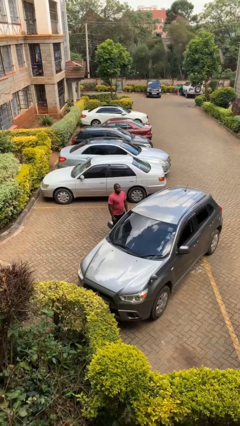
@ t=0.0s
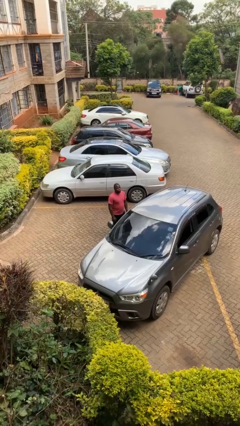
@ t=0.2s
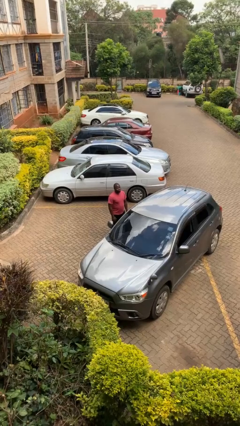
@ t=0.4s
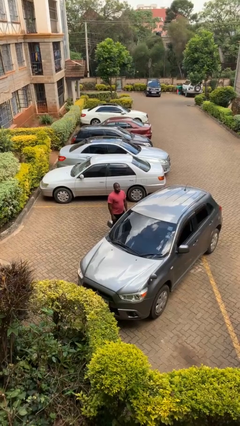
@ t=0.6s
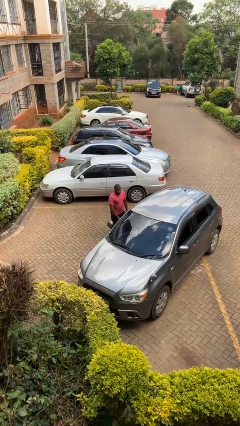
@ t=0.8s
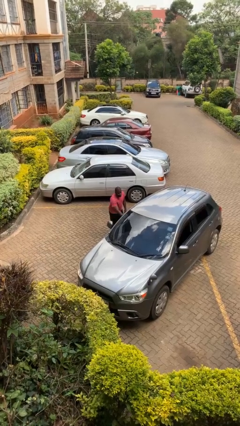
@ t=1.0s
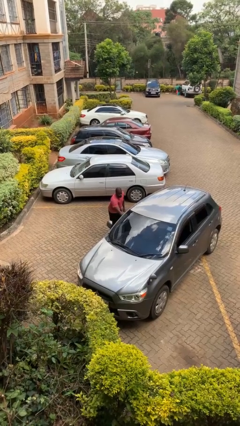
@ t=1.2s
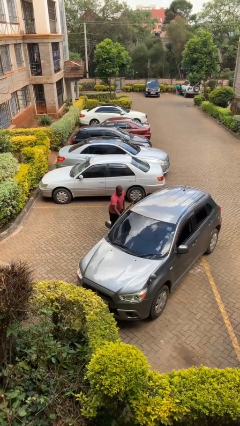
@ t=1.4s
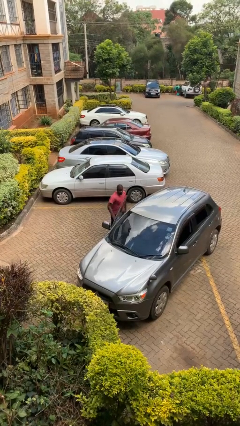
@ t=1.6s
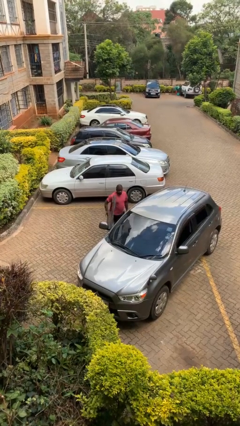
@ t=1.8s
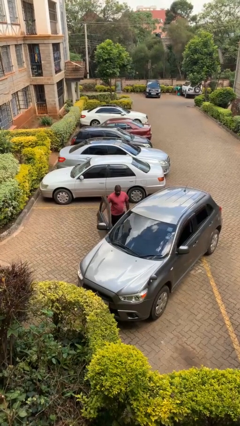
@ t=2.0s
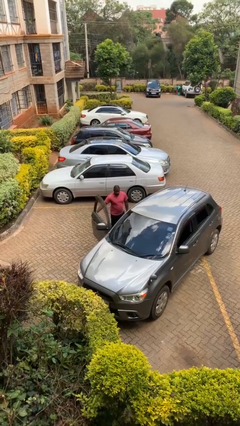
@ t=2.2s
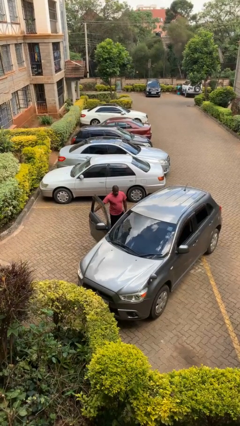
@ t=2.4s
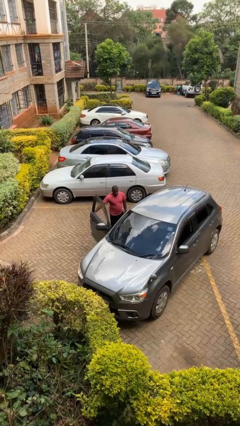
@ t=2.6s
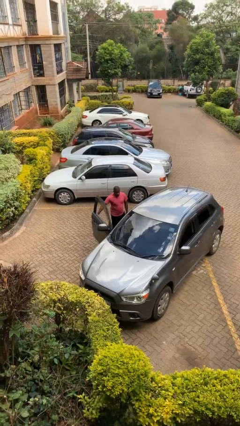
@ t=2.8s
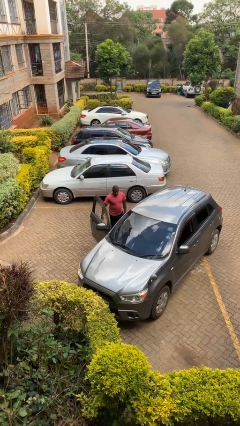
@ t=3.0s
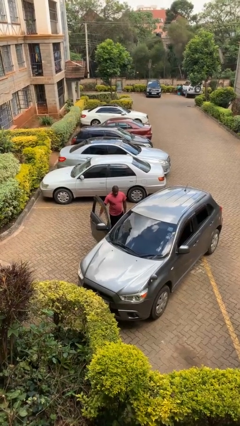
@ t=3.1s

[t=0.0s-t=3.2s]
person opens car door

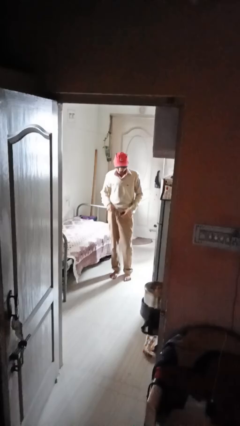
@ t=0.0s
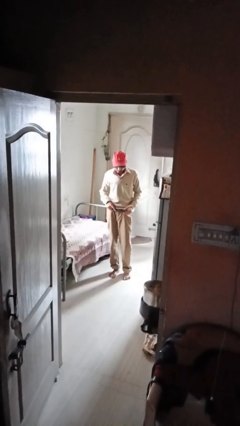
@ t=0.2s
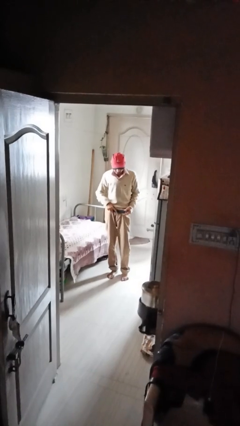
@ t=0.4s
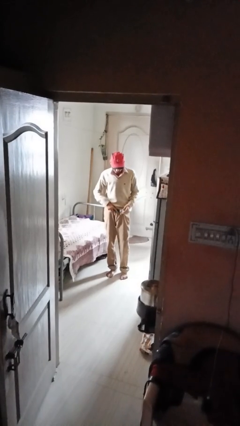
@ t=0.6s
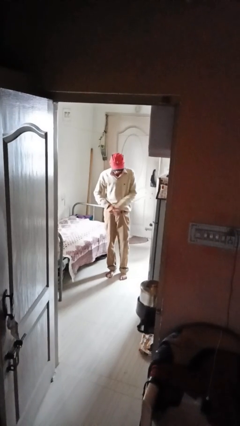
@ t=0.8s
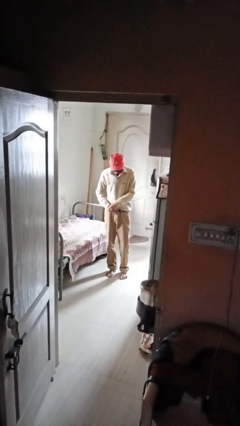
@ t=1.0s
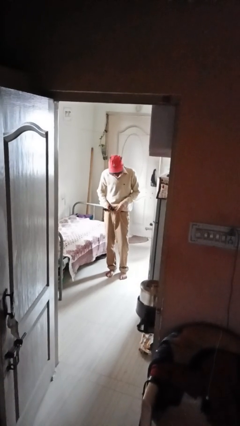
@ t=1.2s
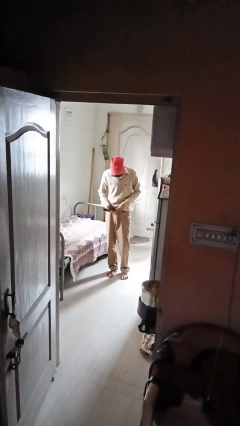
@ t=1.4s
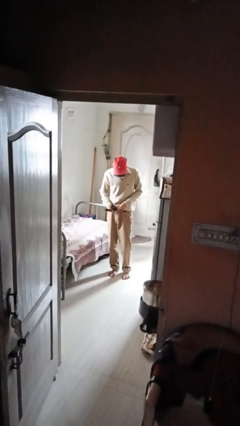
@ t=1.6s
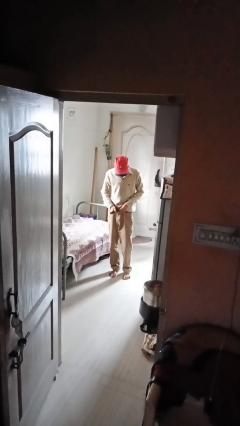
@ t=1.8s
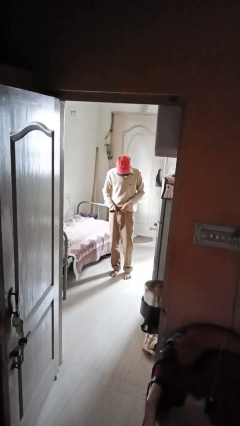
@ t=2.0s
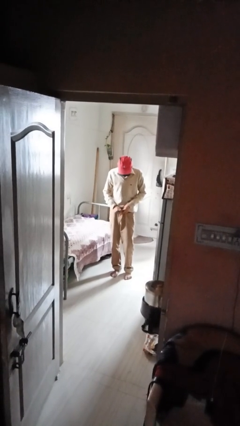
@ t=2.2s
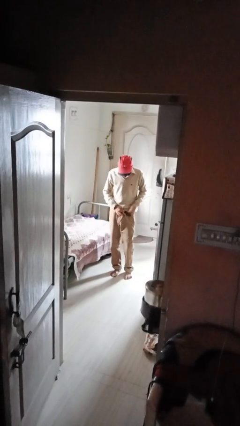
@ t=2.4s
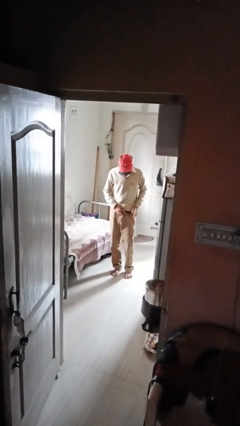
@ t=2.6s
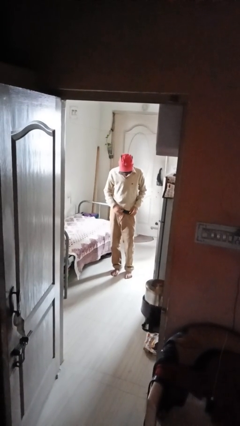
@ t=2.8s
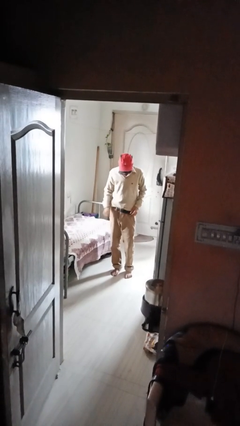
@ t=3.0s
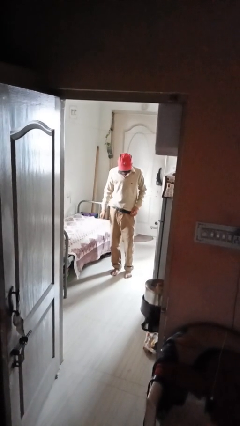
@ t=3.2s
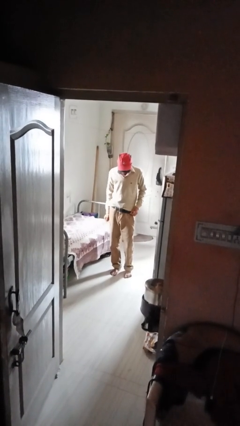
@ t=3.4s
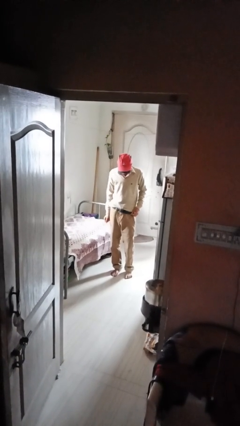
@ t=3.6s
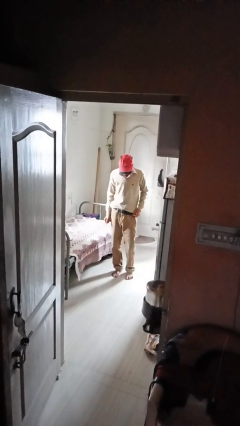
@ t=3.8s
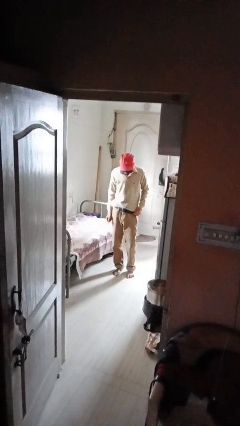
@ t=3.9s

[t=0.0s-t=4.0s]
person puts on belt

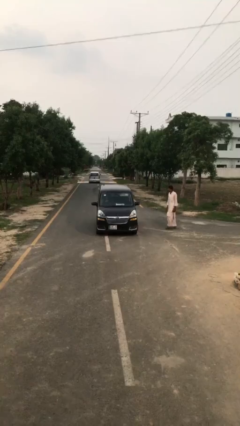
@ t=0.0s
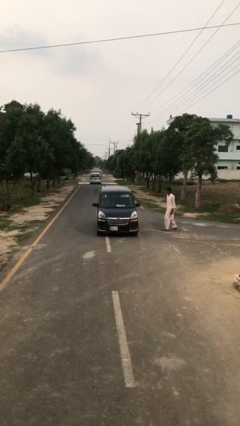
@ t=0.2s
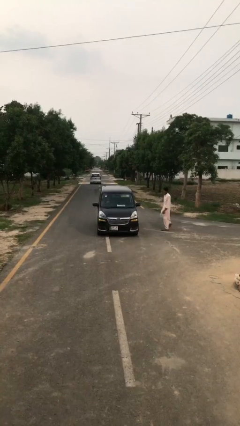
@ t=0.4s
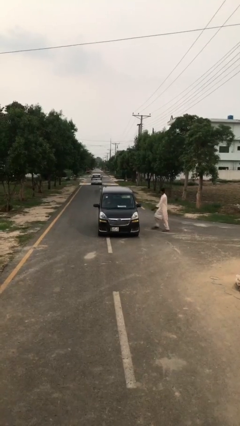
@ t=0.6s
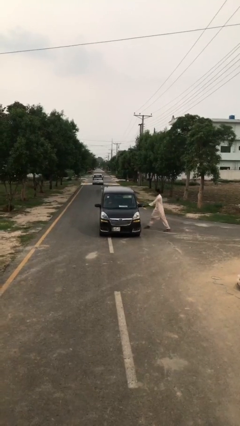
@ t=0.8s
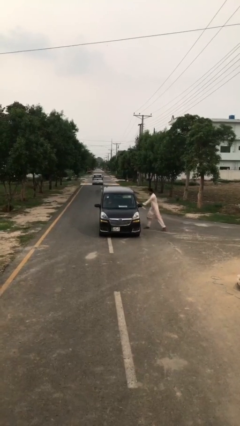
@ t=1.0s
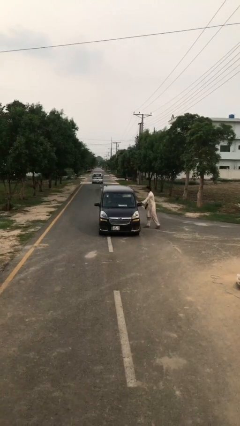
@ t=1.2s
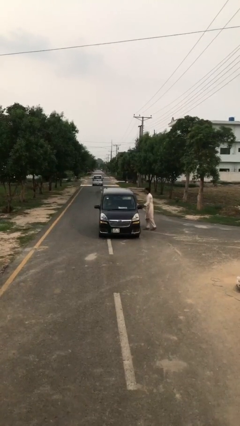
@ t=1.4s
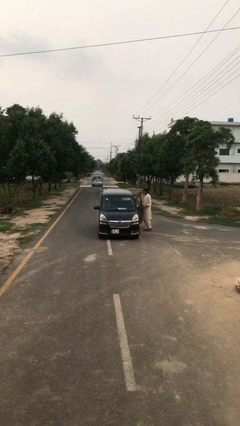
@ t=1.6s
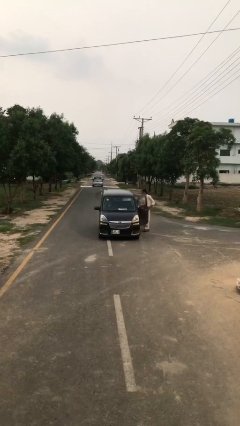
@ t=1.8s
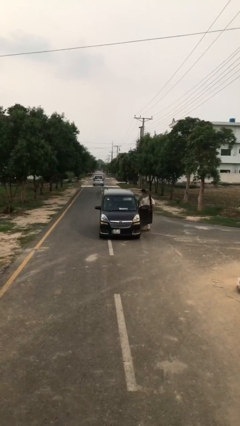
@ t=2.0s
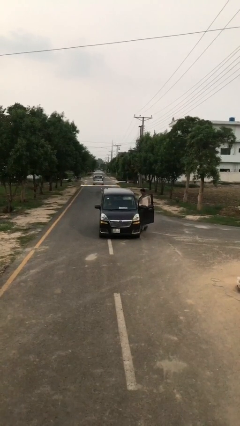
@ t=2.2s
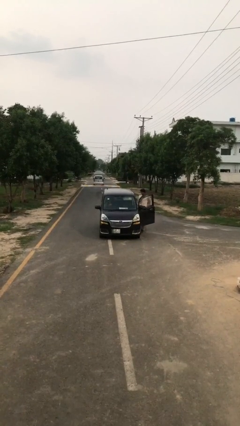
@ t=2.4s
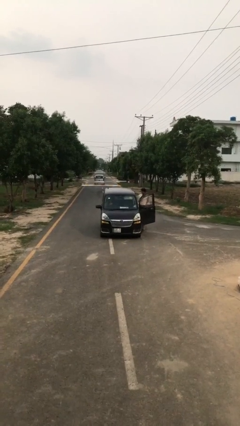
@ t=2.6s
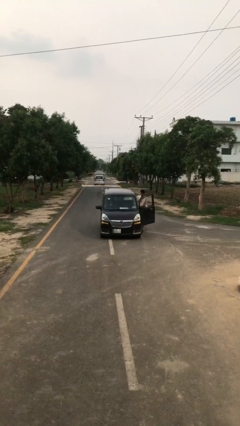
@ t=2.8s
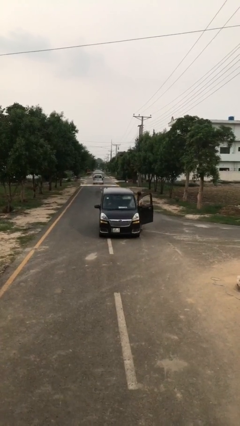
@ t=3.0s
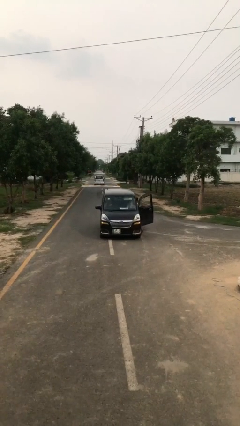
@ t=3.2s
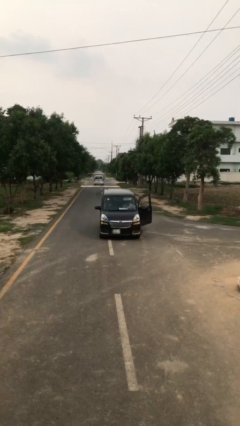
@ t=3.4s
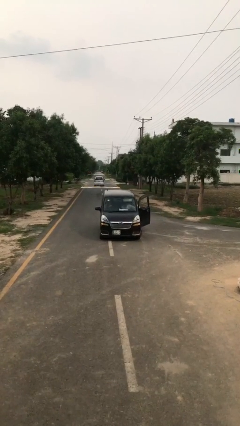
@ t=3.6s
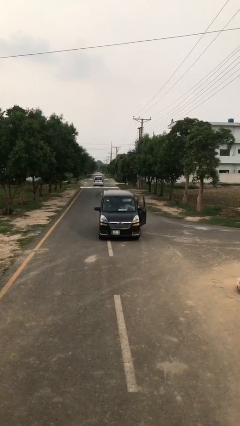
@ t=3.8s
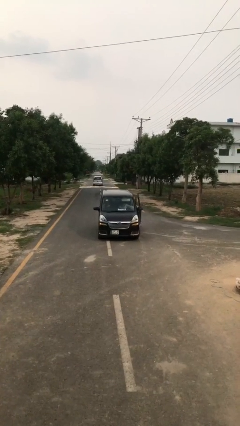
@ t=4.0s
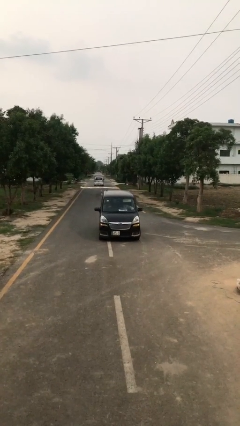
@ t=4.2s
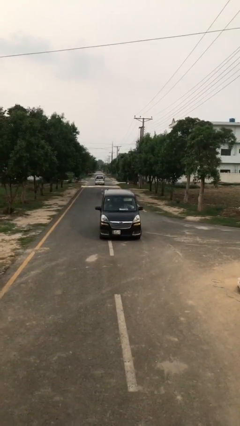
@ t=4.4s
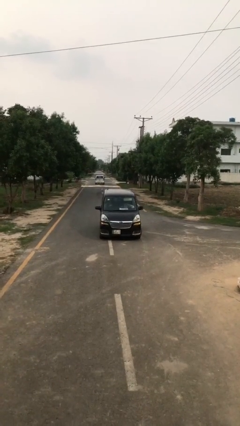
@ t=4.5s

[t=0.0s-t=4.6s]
car picks up person

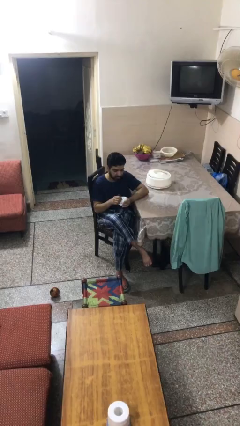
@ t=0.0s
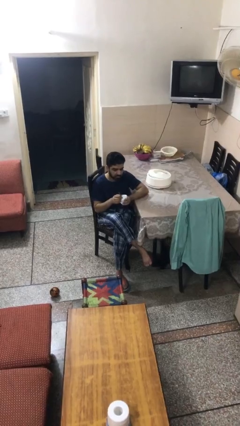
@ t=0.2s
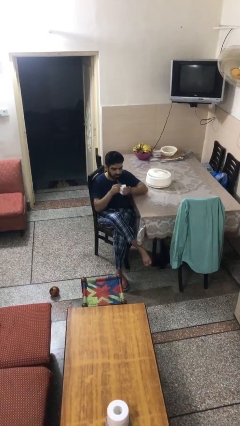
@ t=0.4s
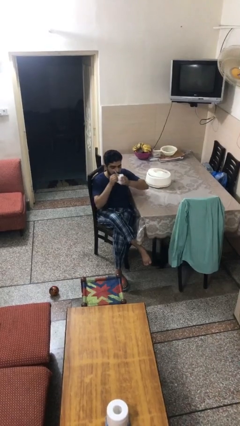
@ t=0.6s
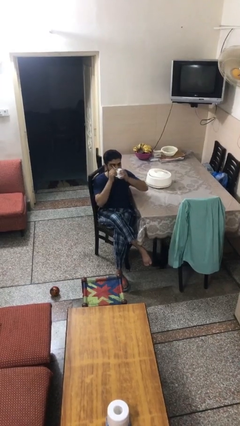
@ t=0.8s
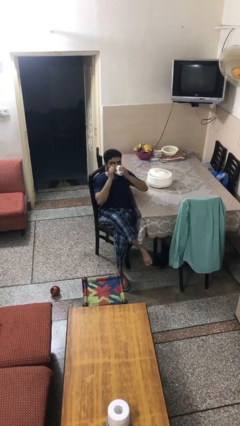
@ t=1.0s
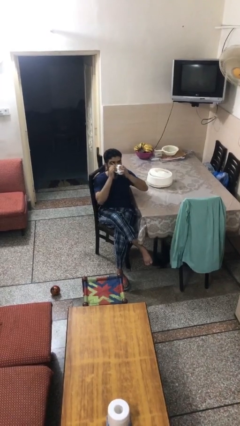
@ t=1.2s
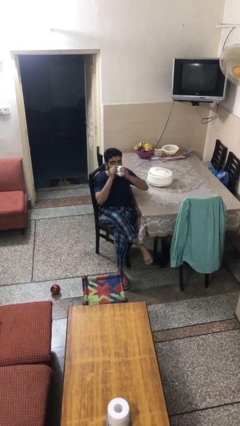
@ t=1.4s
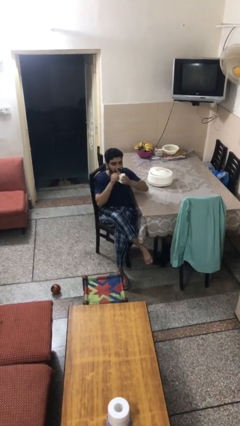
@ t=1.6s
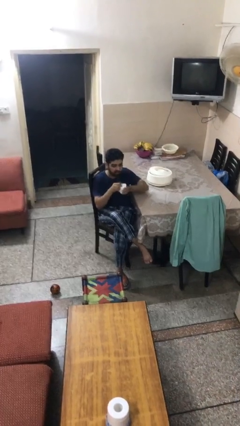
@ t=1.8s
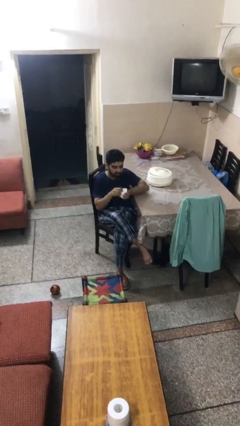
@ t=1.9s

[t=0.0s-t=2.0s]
person drinks from mug

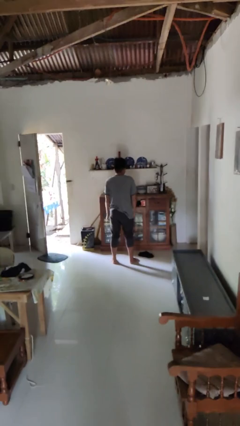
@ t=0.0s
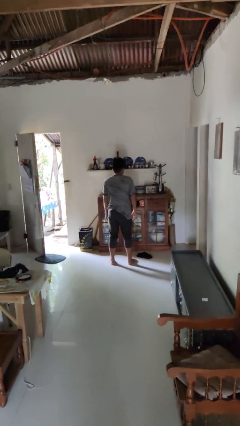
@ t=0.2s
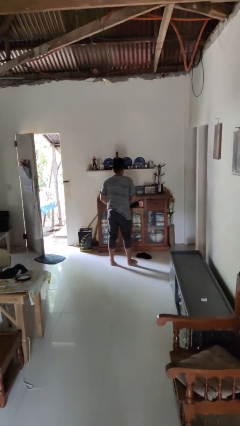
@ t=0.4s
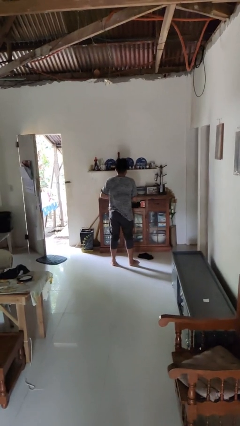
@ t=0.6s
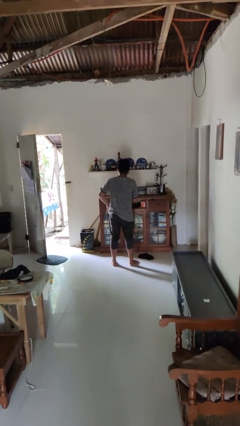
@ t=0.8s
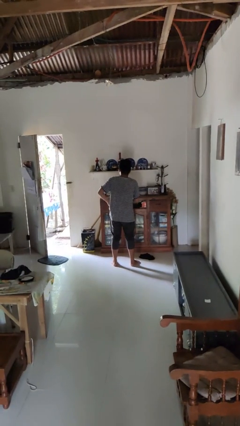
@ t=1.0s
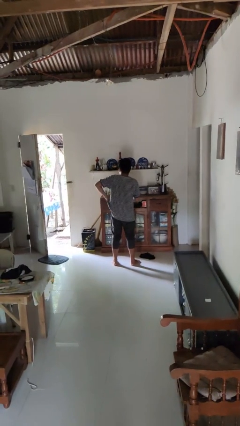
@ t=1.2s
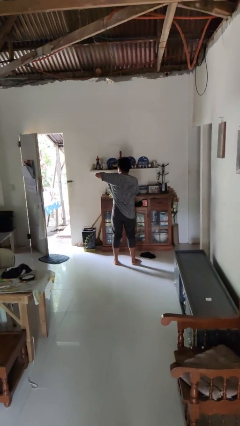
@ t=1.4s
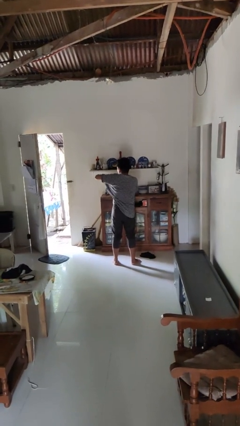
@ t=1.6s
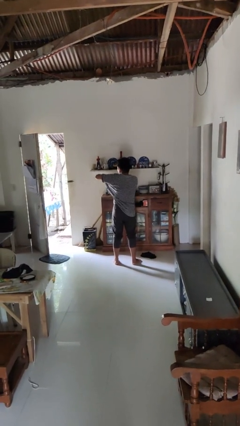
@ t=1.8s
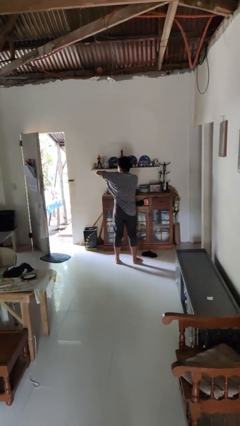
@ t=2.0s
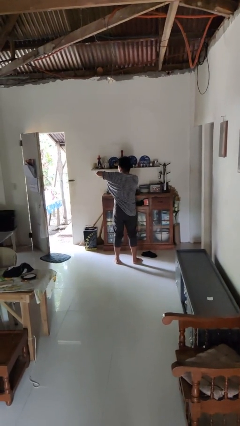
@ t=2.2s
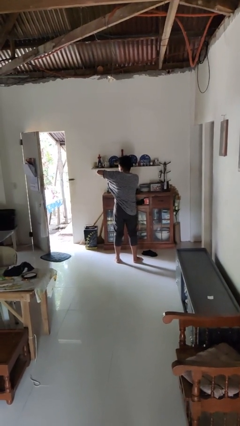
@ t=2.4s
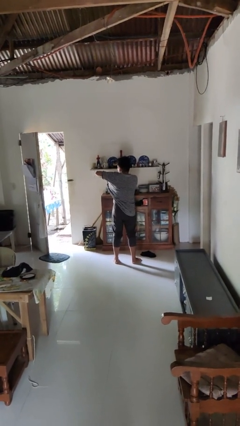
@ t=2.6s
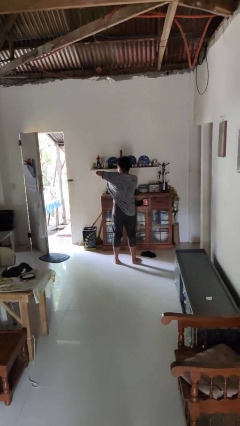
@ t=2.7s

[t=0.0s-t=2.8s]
person applies deodorant

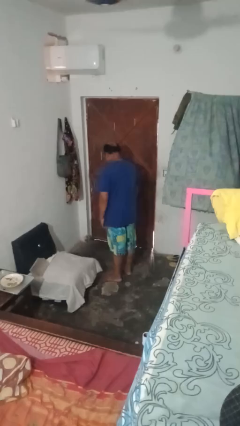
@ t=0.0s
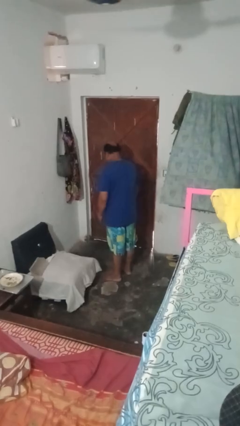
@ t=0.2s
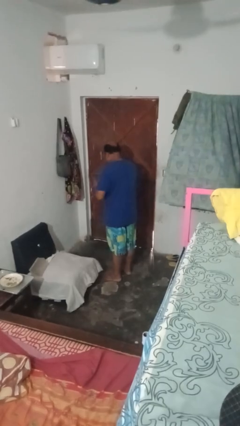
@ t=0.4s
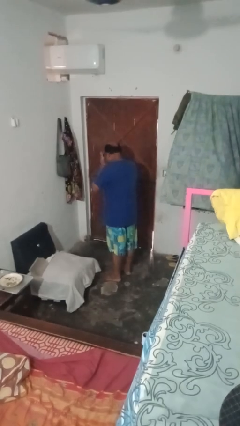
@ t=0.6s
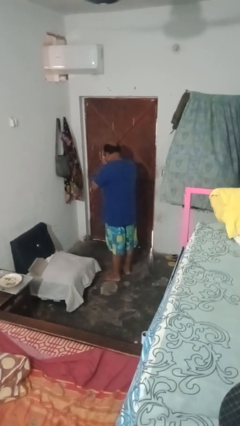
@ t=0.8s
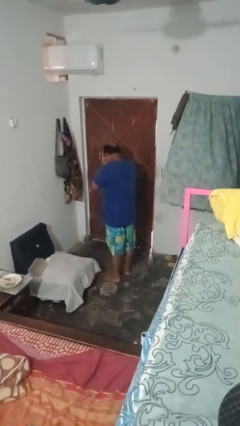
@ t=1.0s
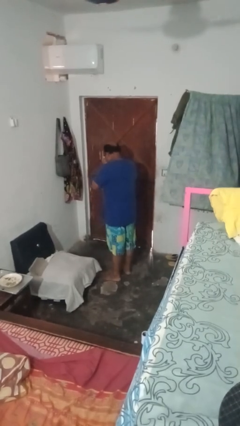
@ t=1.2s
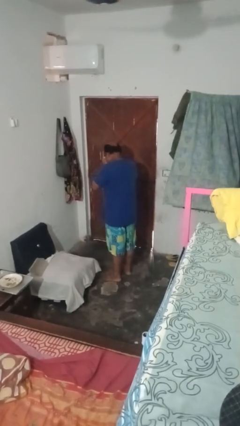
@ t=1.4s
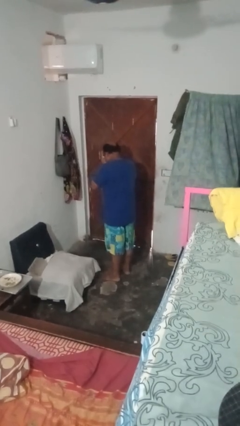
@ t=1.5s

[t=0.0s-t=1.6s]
person covers face with hands
